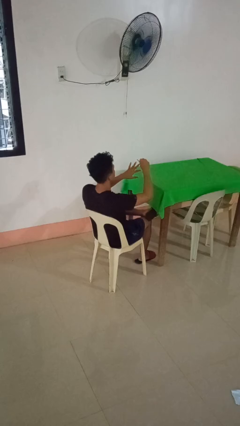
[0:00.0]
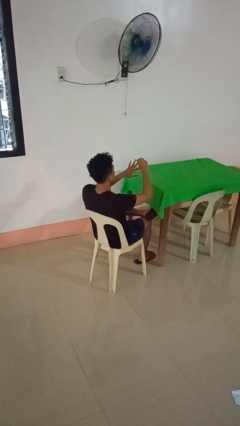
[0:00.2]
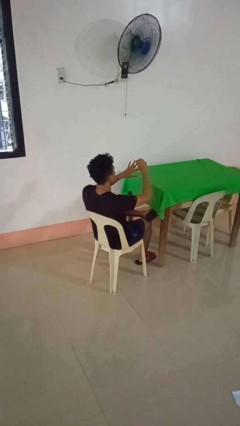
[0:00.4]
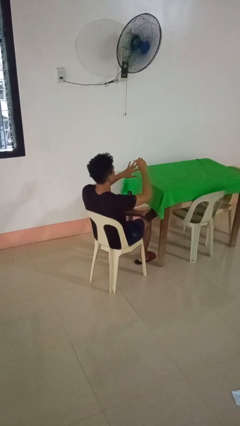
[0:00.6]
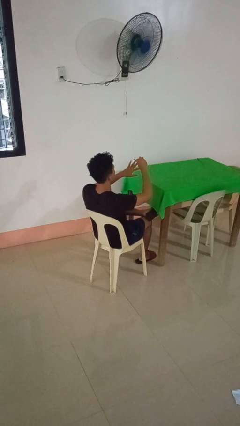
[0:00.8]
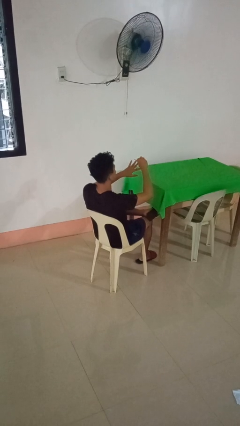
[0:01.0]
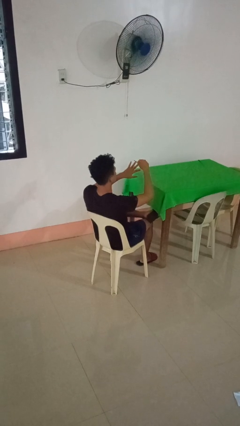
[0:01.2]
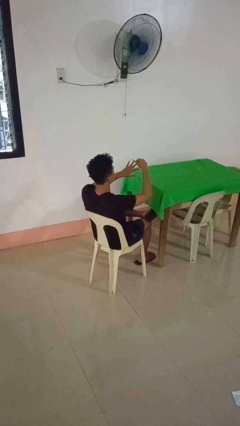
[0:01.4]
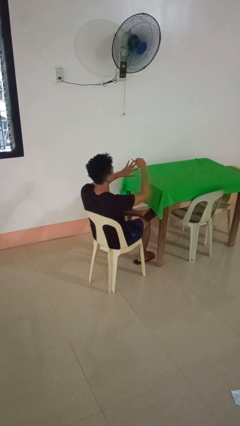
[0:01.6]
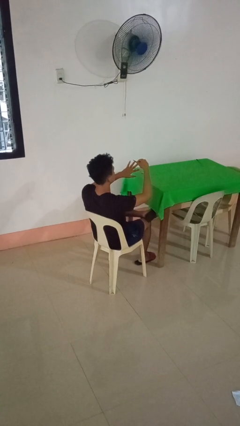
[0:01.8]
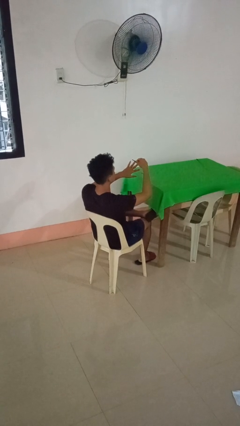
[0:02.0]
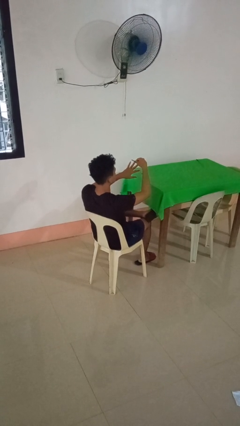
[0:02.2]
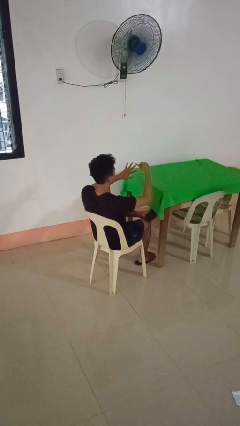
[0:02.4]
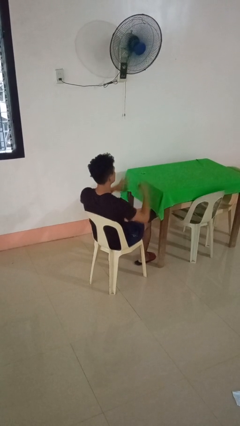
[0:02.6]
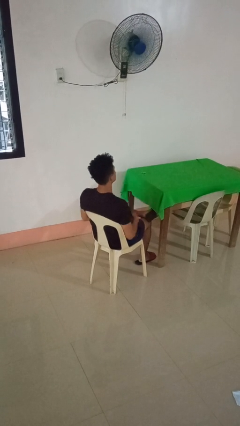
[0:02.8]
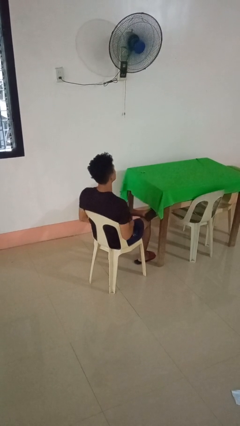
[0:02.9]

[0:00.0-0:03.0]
person files fingernails

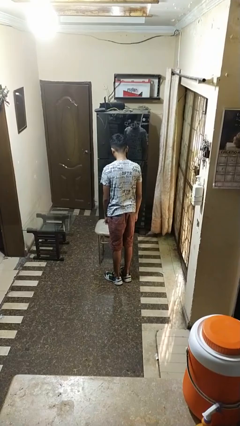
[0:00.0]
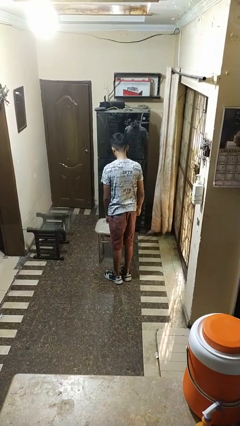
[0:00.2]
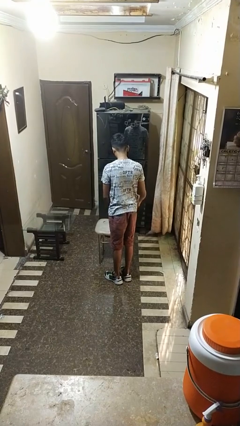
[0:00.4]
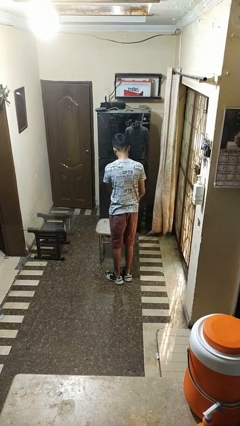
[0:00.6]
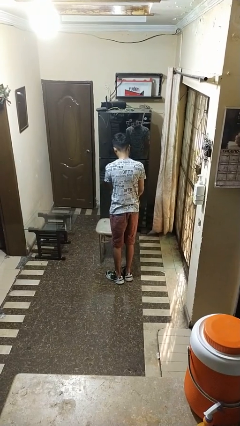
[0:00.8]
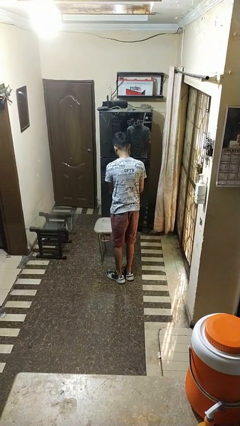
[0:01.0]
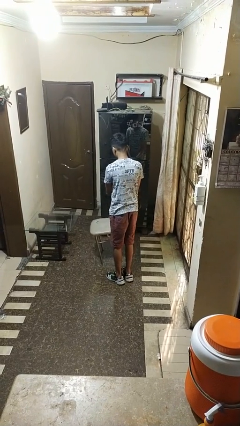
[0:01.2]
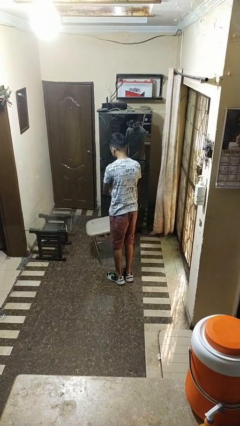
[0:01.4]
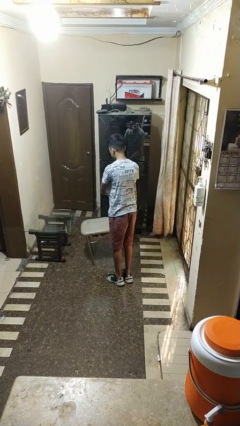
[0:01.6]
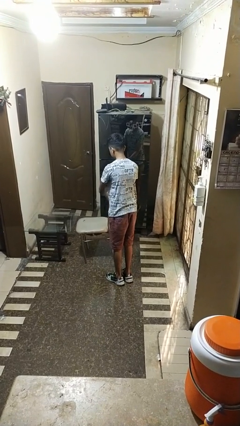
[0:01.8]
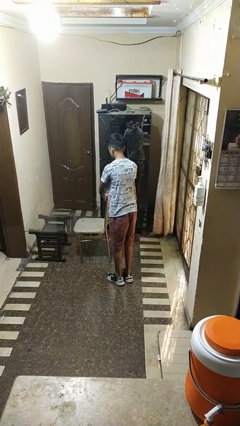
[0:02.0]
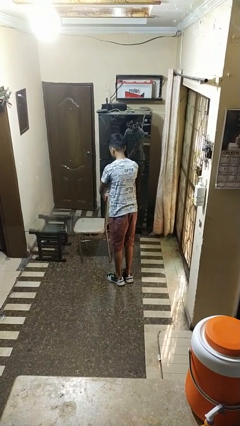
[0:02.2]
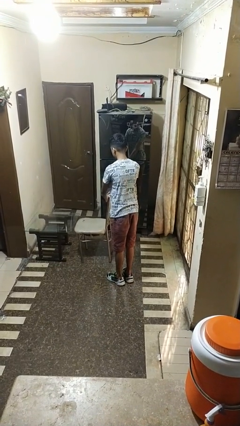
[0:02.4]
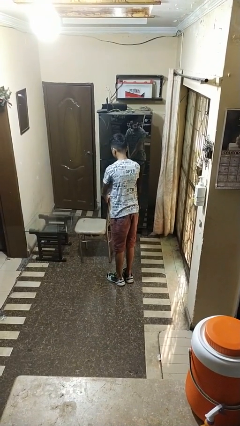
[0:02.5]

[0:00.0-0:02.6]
person pushes in chair

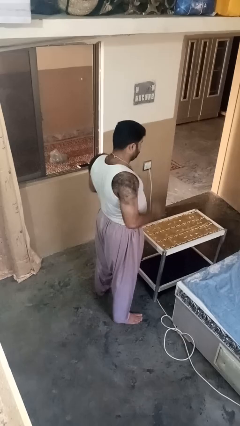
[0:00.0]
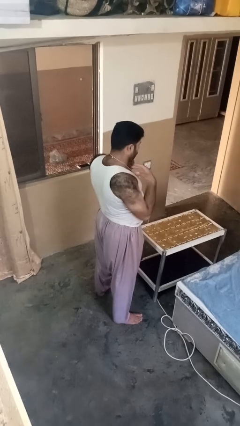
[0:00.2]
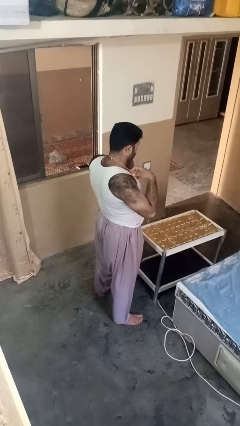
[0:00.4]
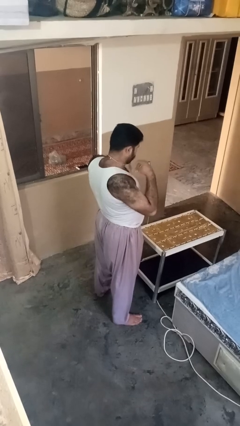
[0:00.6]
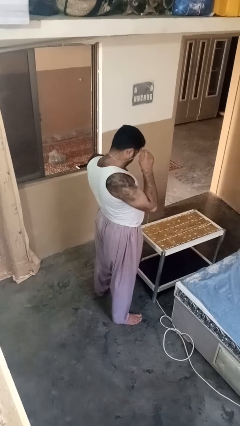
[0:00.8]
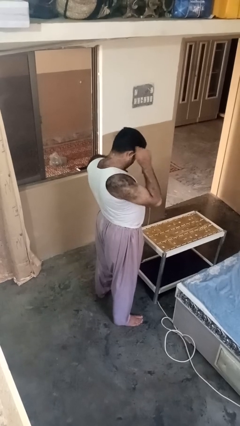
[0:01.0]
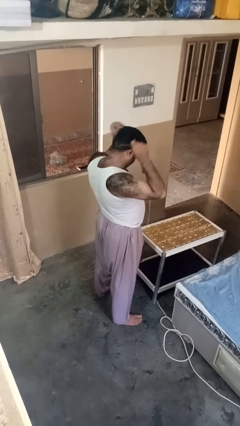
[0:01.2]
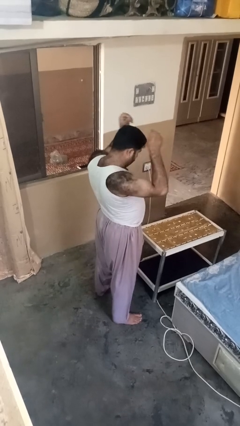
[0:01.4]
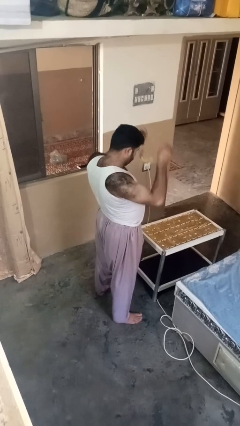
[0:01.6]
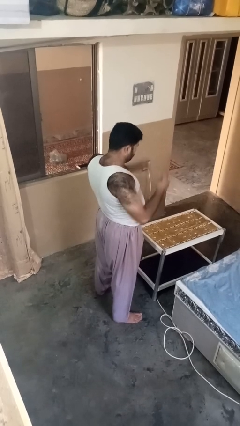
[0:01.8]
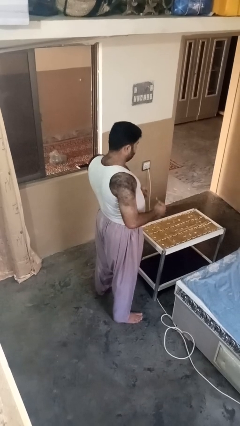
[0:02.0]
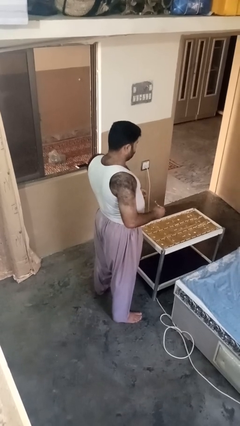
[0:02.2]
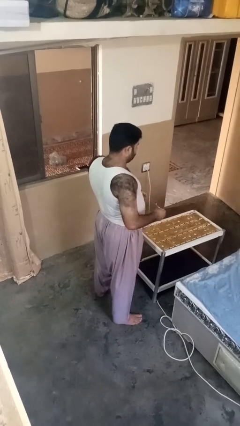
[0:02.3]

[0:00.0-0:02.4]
person takes off necklace

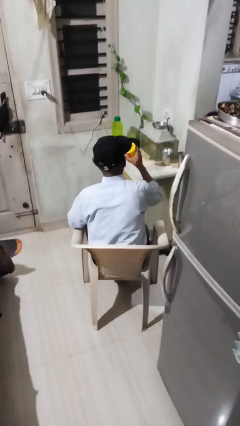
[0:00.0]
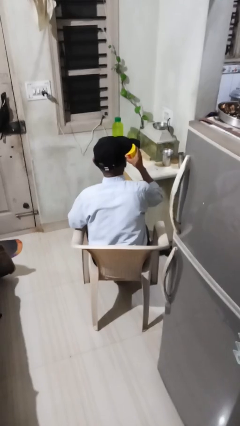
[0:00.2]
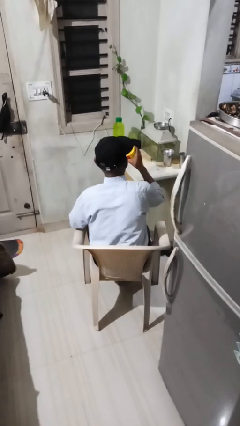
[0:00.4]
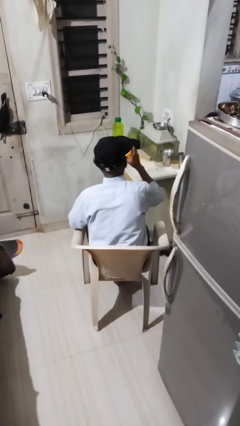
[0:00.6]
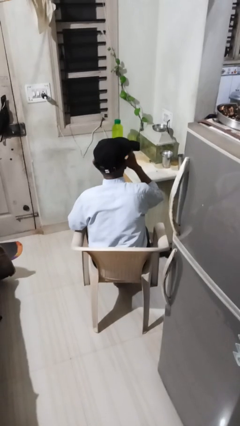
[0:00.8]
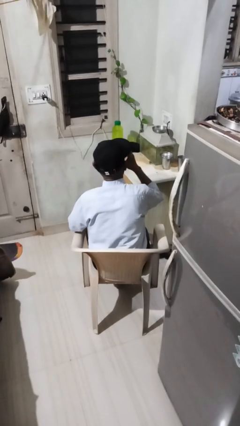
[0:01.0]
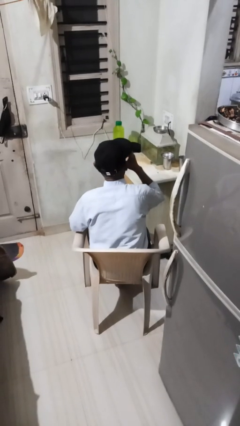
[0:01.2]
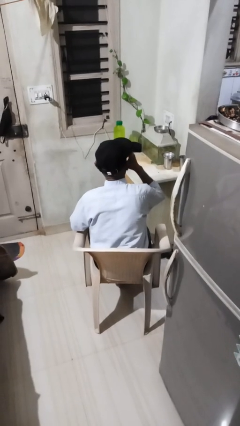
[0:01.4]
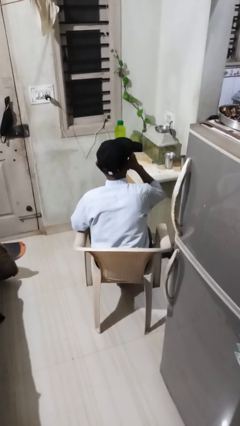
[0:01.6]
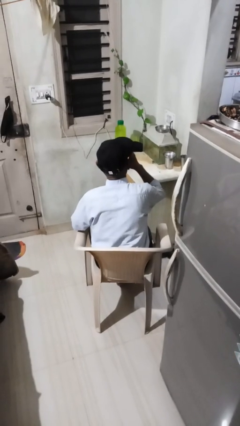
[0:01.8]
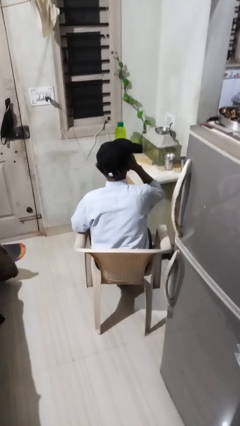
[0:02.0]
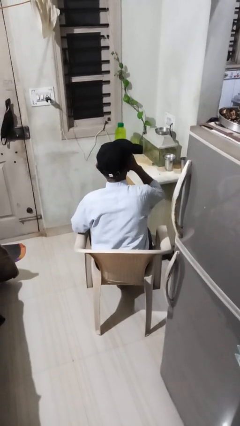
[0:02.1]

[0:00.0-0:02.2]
person drinks from mug

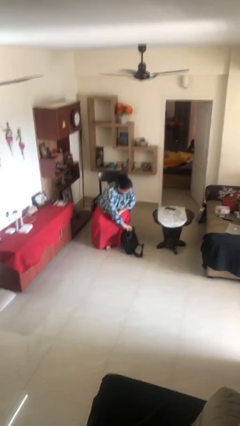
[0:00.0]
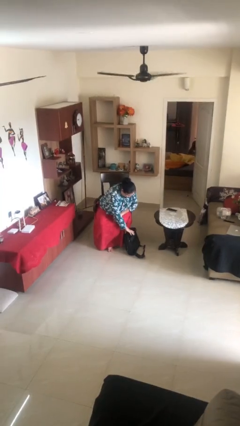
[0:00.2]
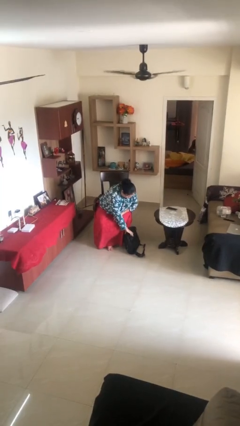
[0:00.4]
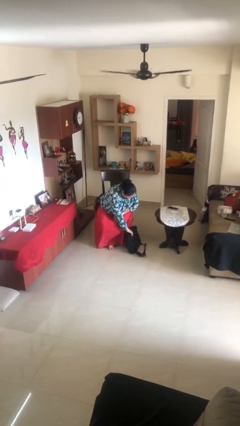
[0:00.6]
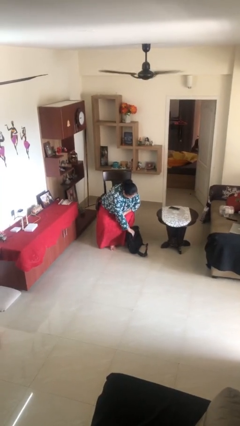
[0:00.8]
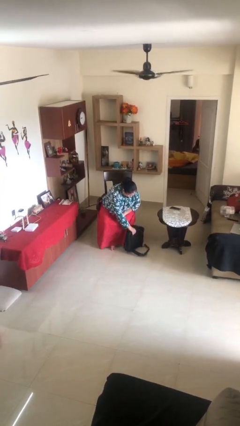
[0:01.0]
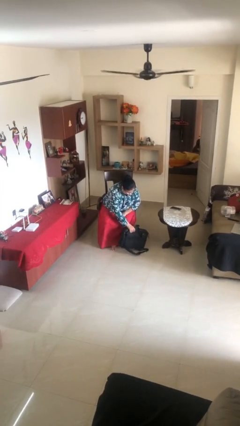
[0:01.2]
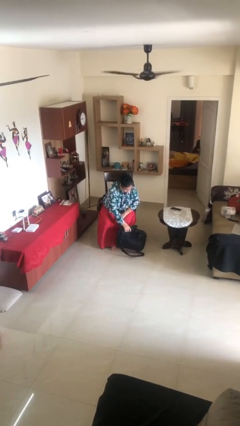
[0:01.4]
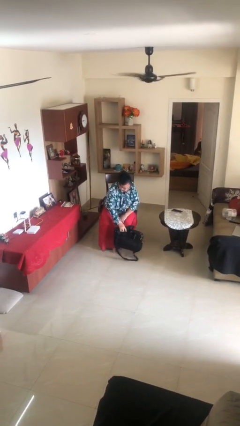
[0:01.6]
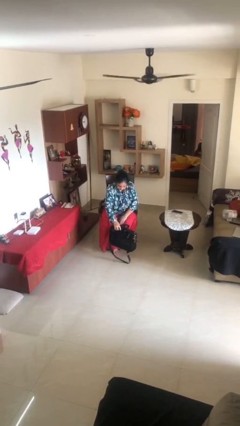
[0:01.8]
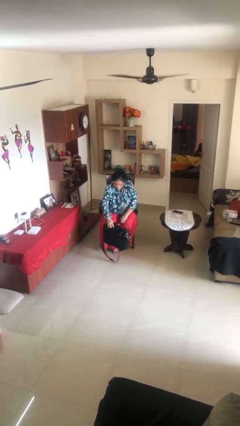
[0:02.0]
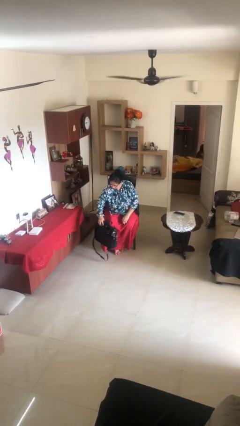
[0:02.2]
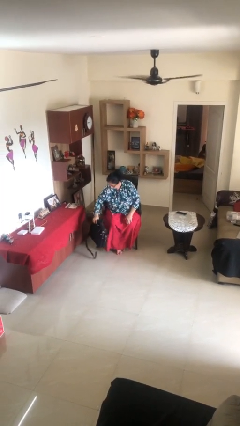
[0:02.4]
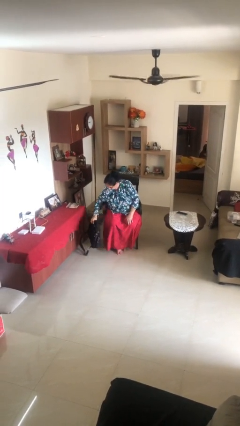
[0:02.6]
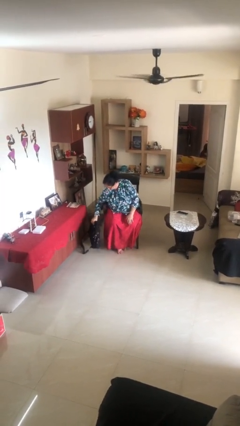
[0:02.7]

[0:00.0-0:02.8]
person picks up object from floor

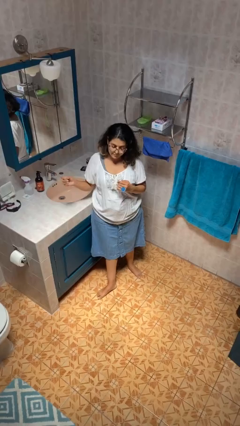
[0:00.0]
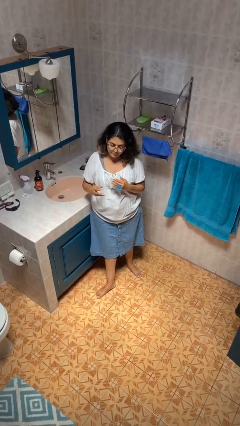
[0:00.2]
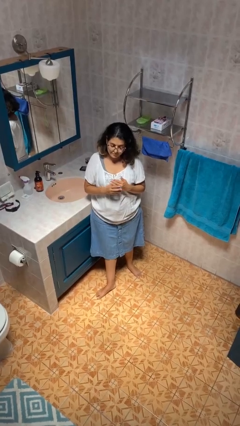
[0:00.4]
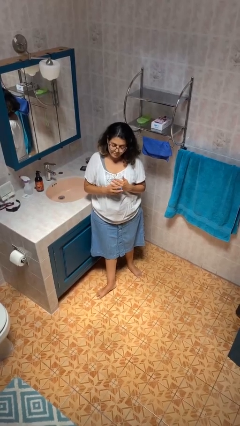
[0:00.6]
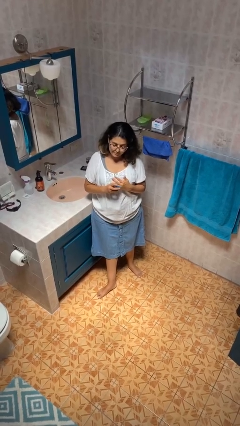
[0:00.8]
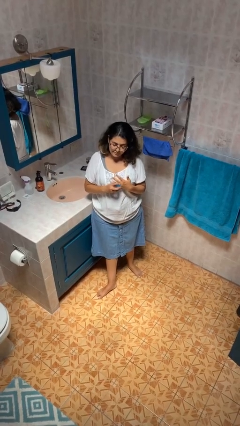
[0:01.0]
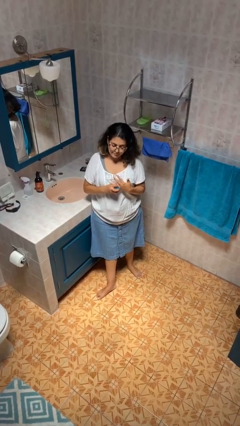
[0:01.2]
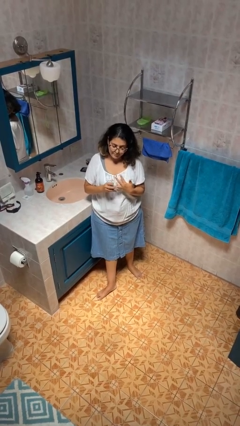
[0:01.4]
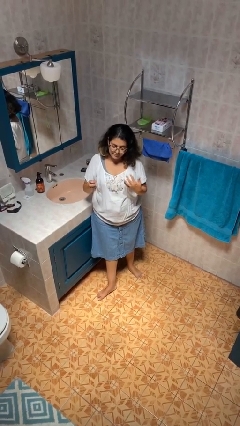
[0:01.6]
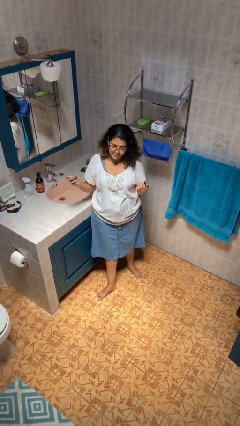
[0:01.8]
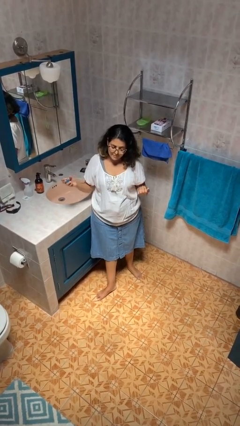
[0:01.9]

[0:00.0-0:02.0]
person takes off ring

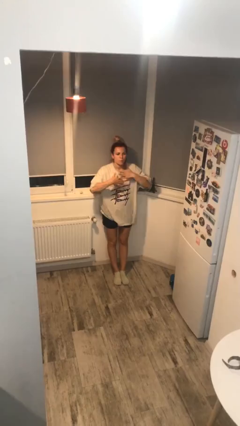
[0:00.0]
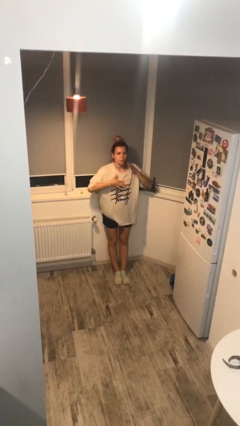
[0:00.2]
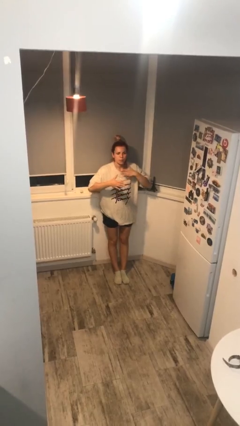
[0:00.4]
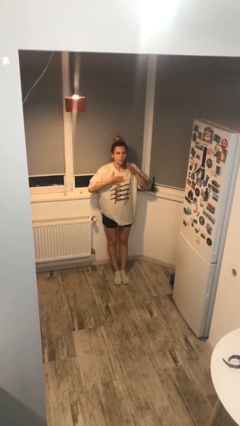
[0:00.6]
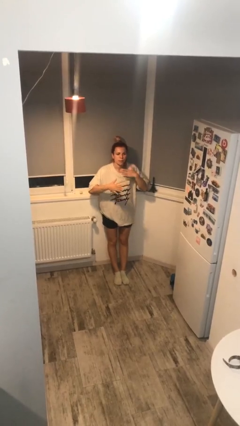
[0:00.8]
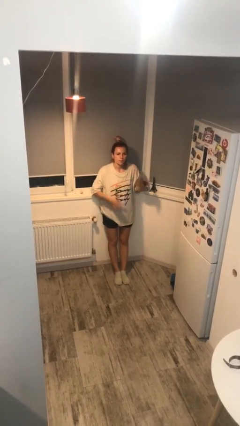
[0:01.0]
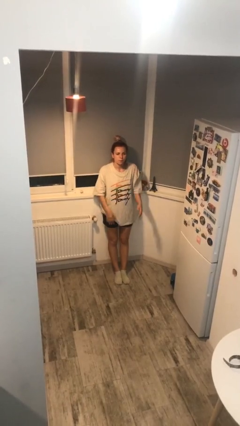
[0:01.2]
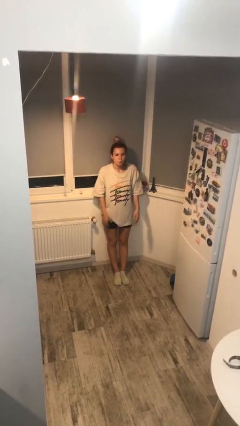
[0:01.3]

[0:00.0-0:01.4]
person drums on chest

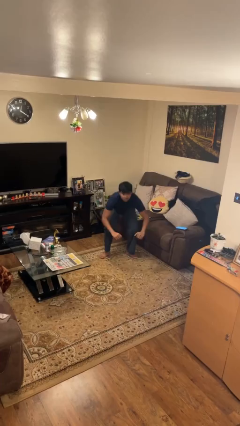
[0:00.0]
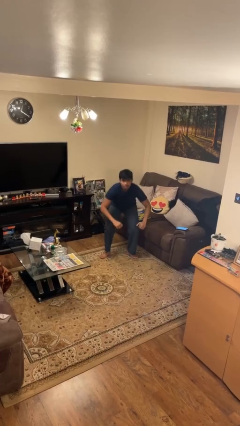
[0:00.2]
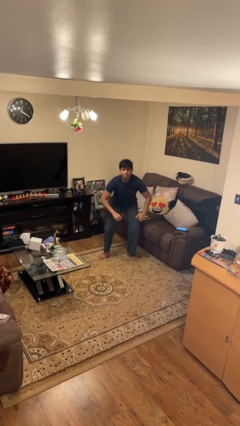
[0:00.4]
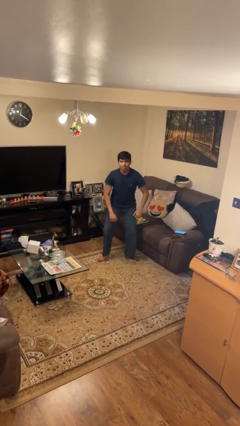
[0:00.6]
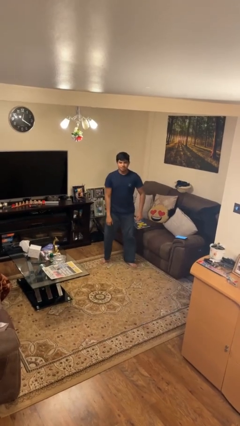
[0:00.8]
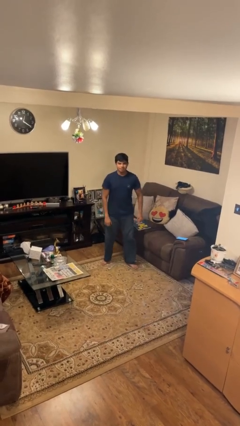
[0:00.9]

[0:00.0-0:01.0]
person stands up
